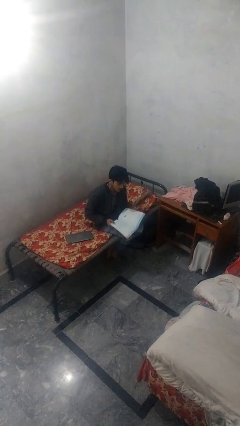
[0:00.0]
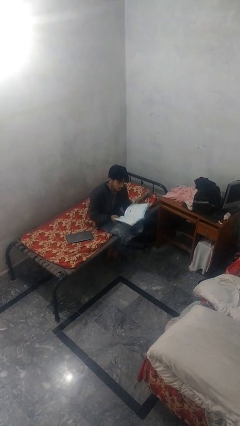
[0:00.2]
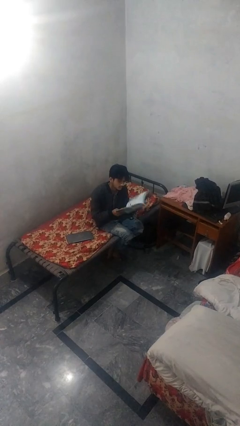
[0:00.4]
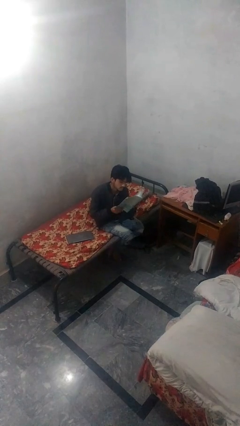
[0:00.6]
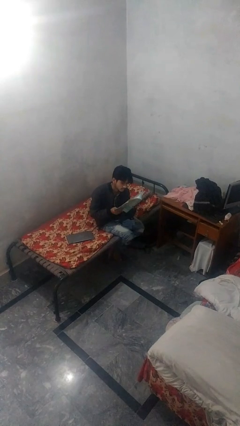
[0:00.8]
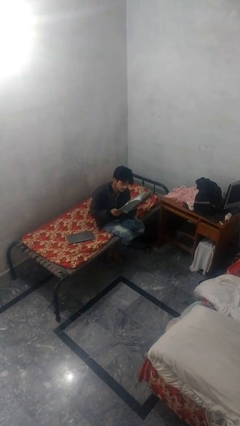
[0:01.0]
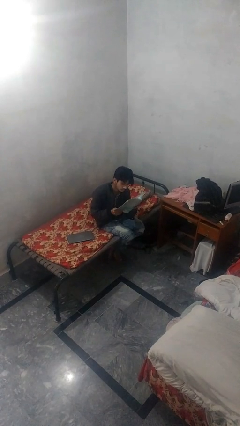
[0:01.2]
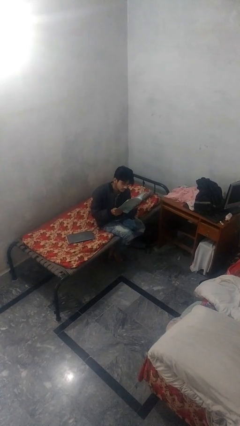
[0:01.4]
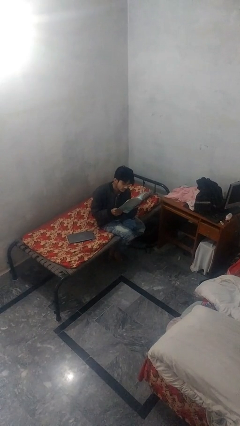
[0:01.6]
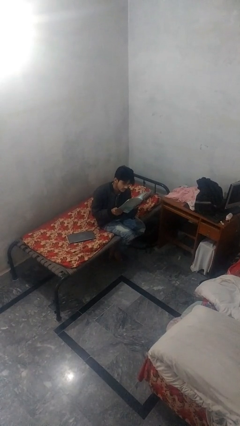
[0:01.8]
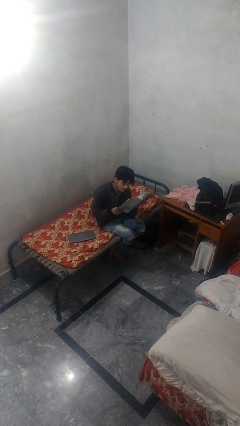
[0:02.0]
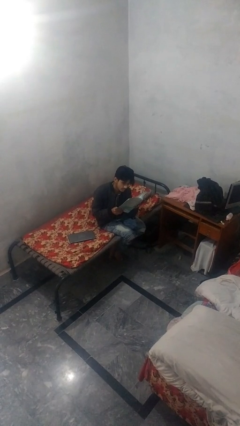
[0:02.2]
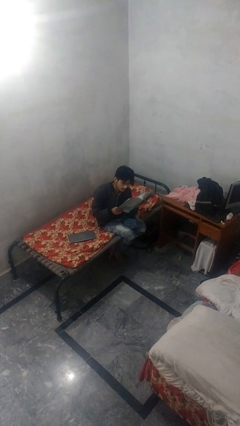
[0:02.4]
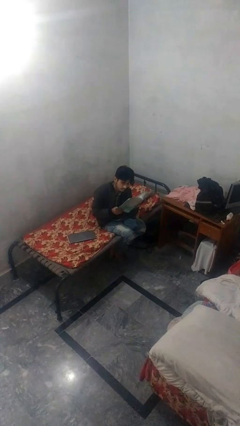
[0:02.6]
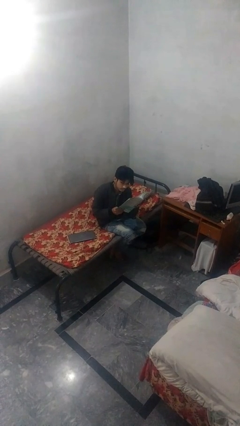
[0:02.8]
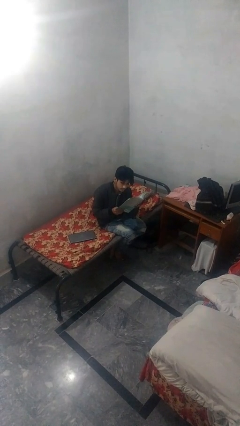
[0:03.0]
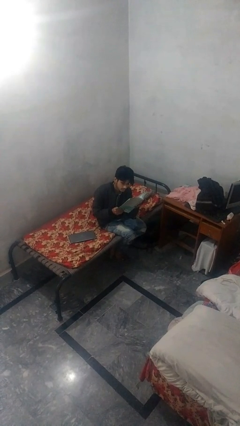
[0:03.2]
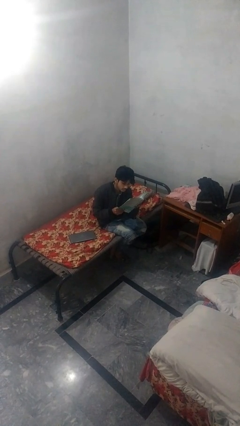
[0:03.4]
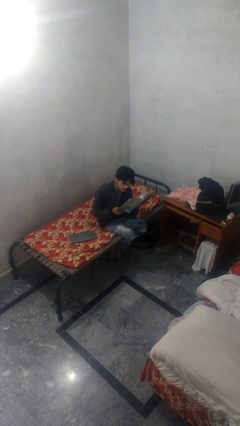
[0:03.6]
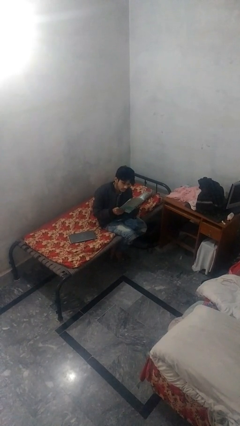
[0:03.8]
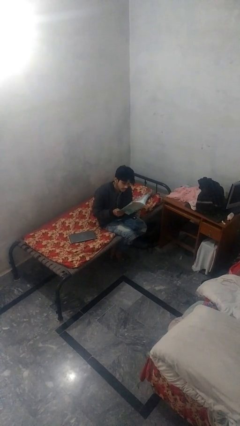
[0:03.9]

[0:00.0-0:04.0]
person reads document

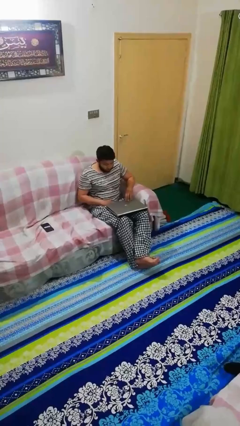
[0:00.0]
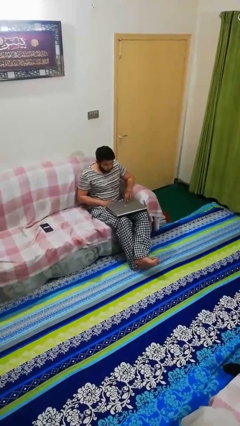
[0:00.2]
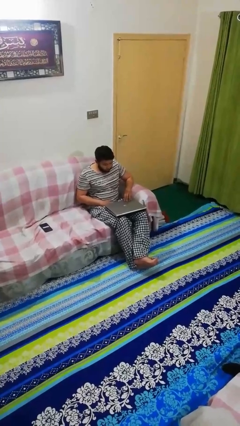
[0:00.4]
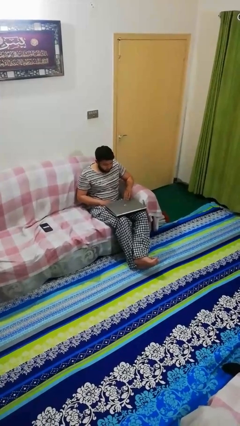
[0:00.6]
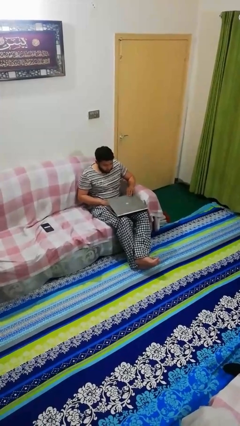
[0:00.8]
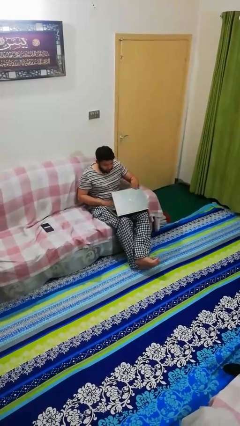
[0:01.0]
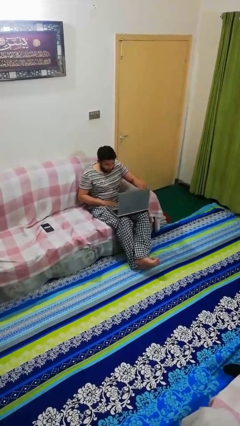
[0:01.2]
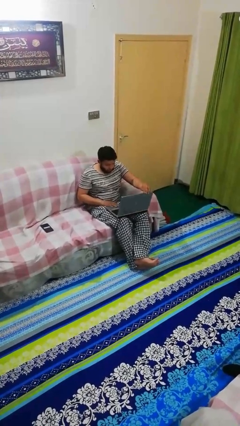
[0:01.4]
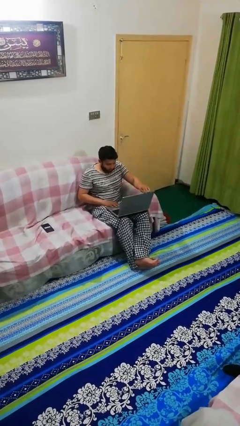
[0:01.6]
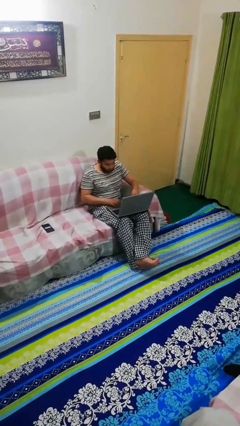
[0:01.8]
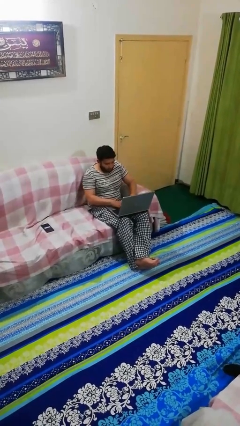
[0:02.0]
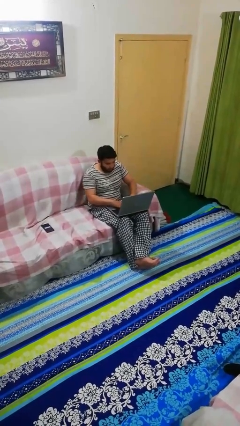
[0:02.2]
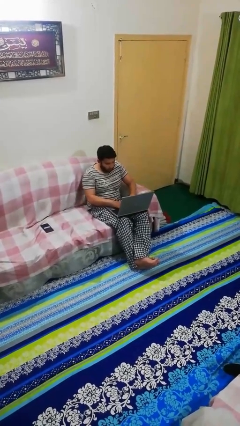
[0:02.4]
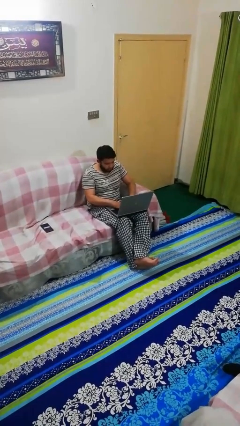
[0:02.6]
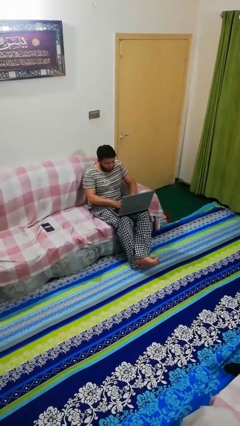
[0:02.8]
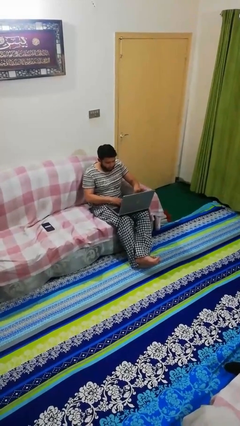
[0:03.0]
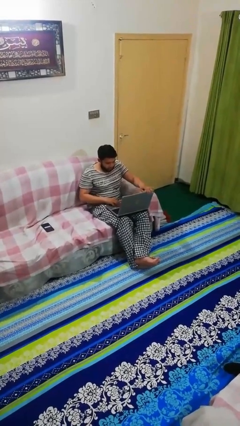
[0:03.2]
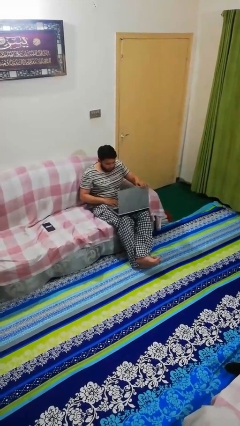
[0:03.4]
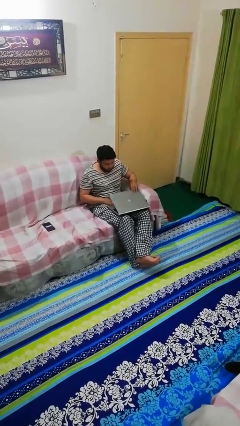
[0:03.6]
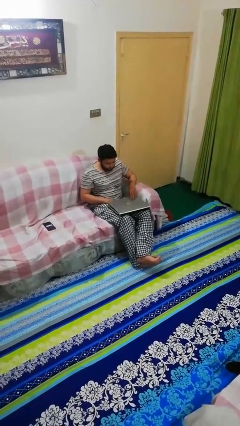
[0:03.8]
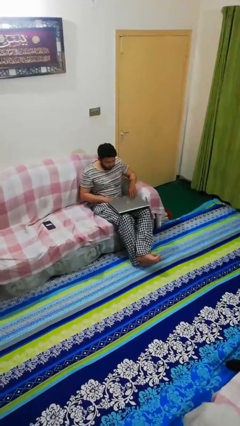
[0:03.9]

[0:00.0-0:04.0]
person interacts with laptop

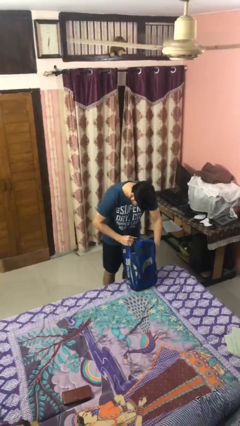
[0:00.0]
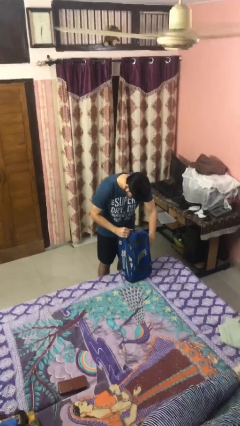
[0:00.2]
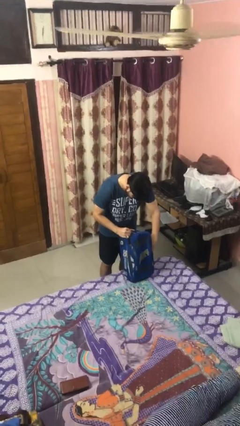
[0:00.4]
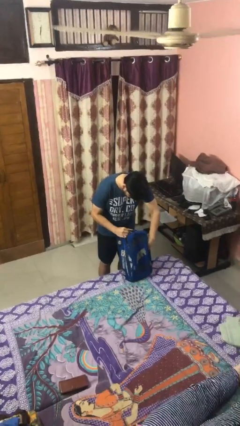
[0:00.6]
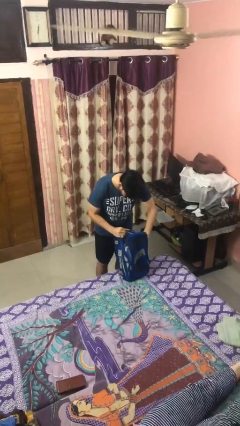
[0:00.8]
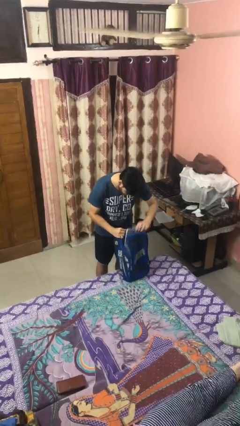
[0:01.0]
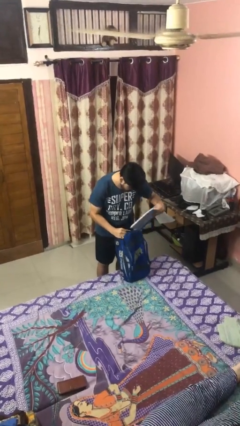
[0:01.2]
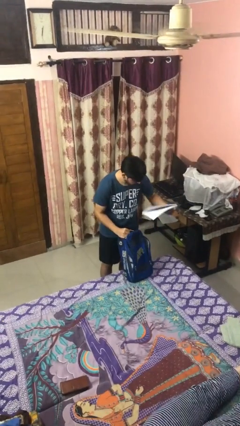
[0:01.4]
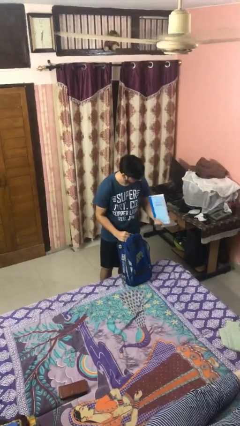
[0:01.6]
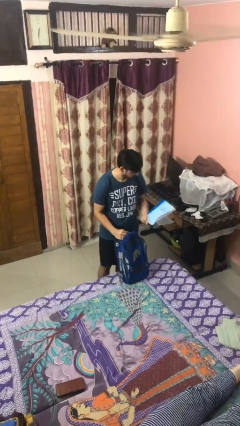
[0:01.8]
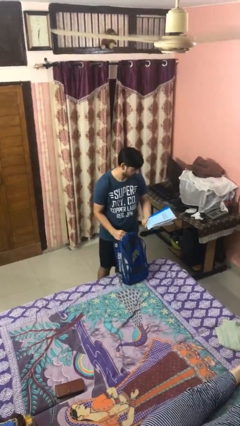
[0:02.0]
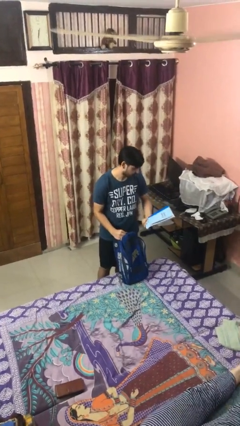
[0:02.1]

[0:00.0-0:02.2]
person takes object from purse

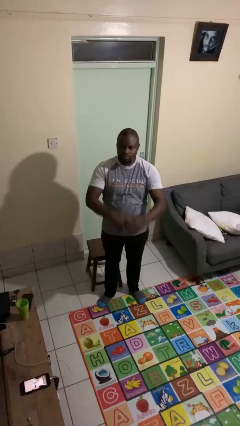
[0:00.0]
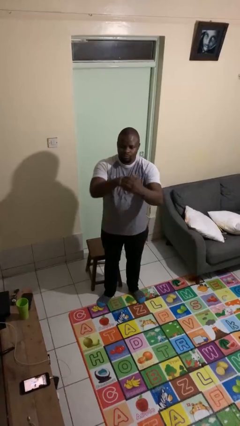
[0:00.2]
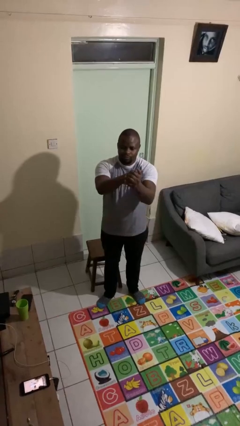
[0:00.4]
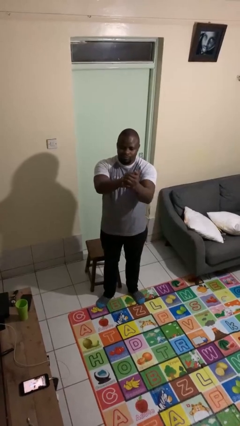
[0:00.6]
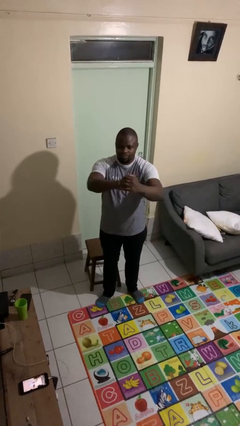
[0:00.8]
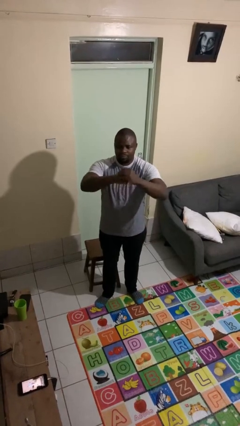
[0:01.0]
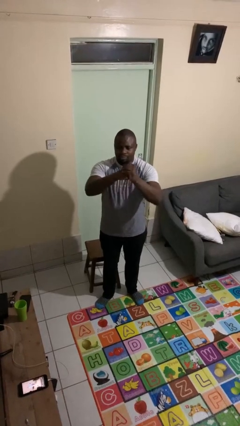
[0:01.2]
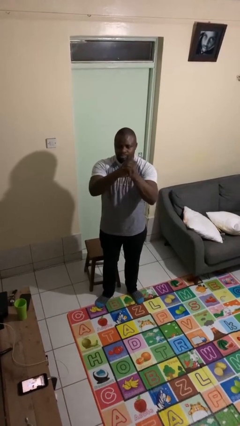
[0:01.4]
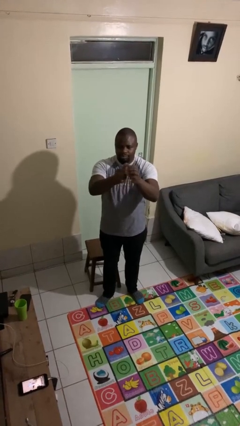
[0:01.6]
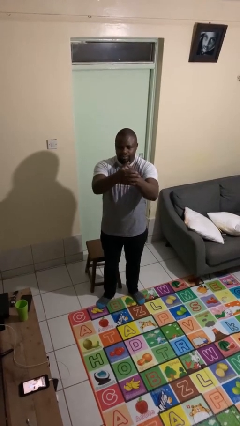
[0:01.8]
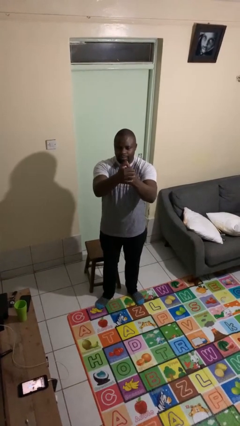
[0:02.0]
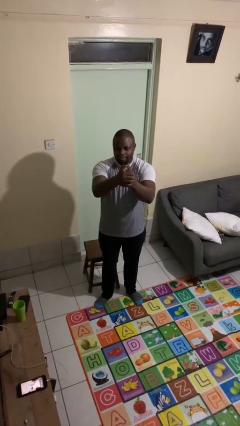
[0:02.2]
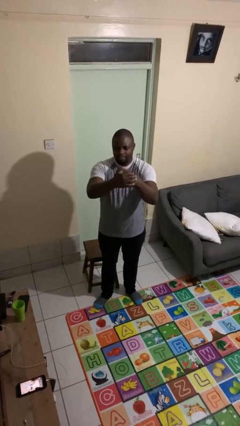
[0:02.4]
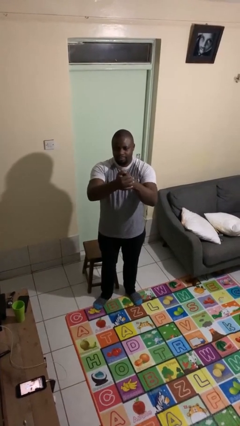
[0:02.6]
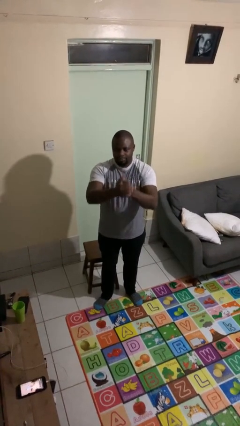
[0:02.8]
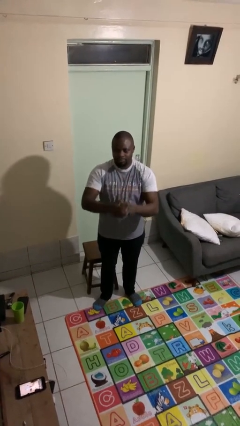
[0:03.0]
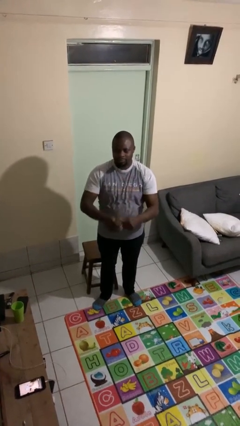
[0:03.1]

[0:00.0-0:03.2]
person cracks knuckles

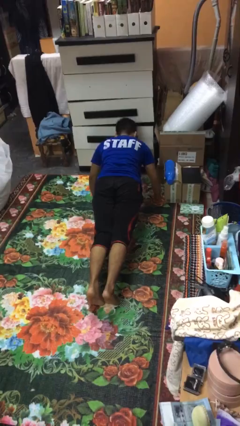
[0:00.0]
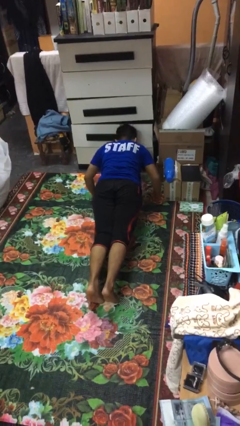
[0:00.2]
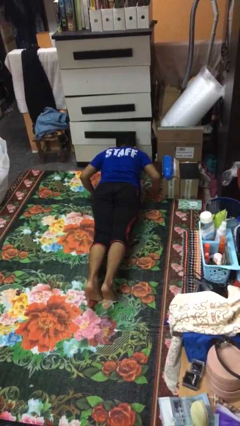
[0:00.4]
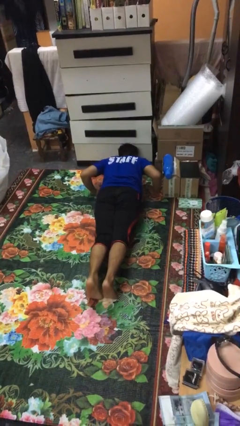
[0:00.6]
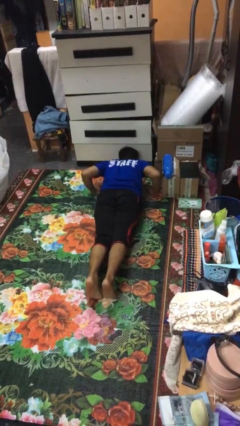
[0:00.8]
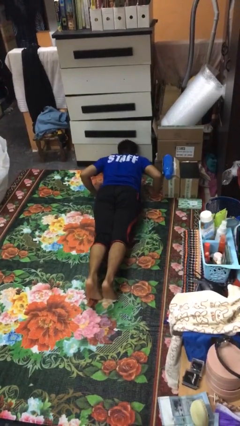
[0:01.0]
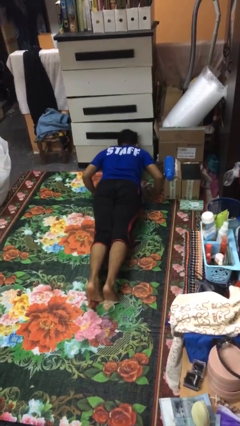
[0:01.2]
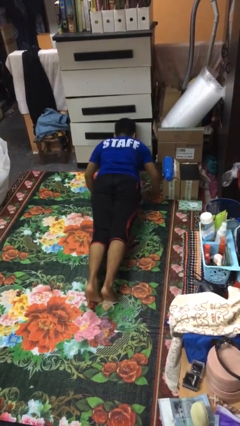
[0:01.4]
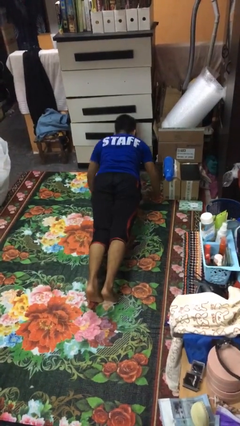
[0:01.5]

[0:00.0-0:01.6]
person exercises with pushup

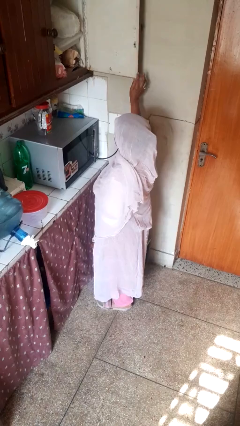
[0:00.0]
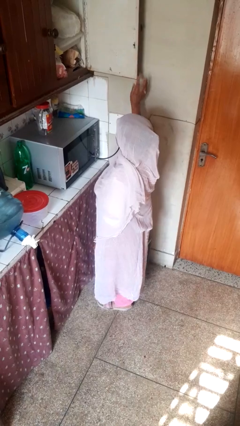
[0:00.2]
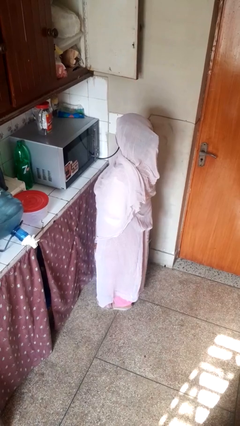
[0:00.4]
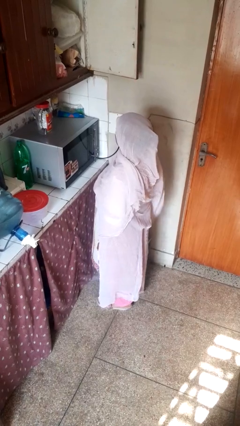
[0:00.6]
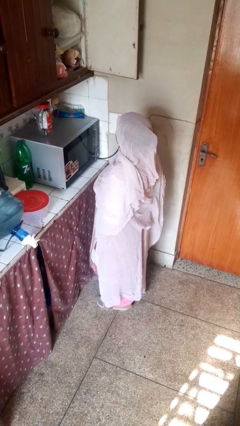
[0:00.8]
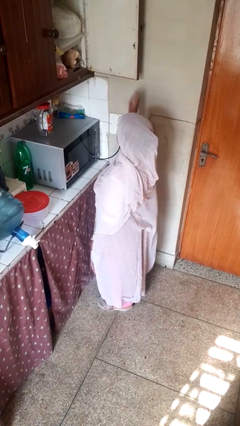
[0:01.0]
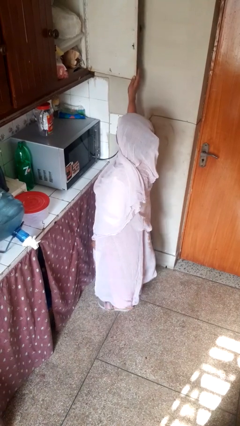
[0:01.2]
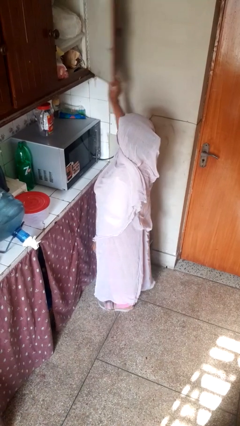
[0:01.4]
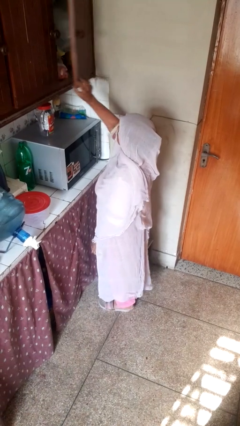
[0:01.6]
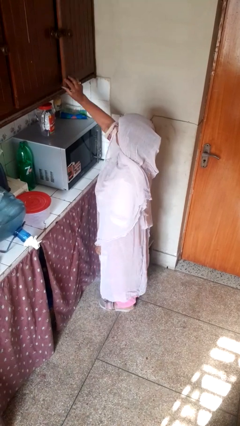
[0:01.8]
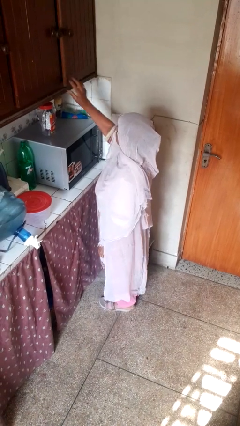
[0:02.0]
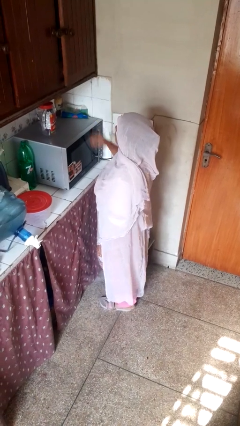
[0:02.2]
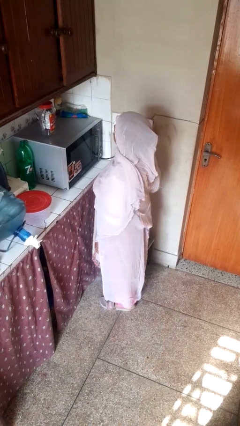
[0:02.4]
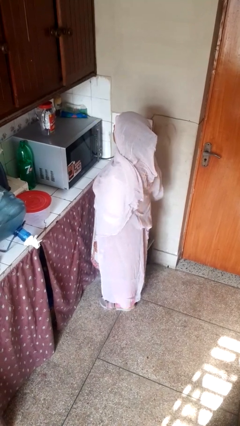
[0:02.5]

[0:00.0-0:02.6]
person closes cabinet
